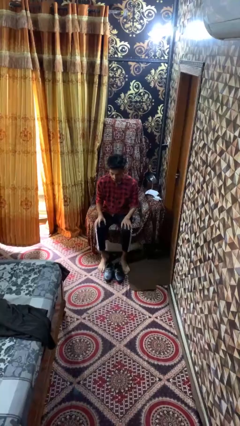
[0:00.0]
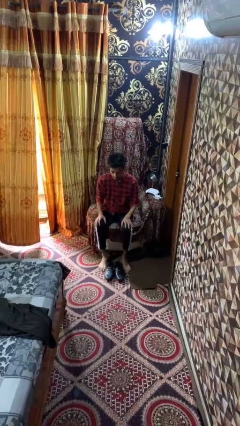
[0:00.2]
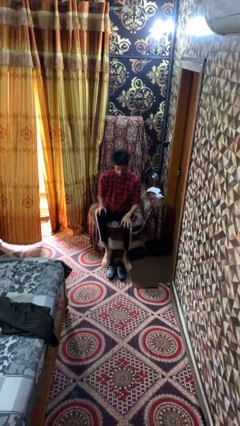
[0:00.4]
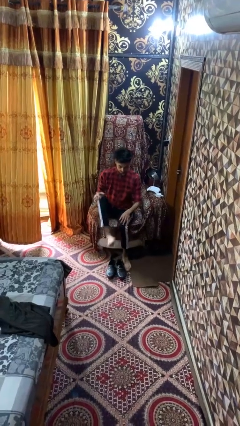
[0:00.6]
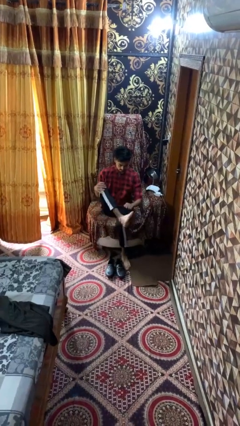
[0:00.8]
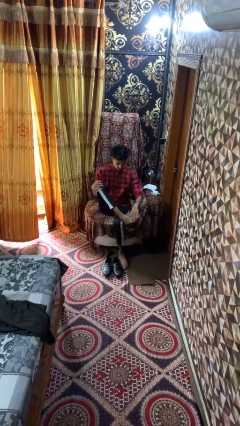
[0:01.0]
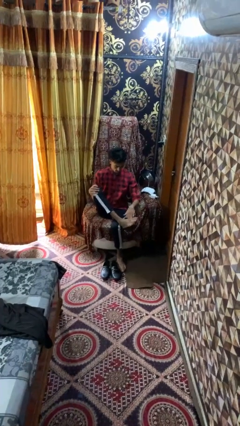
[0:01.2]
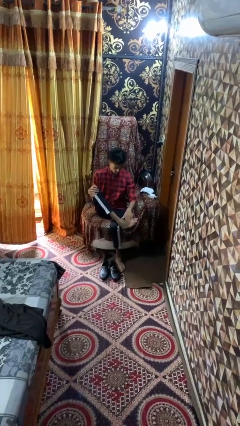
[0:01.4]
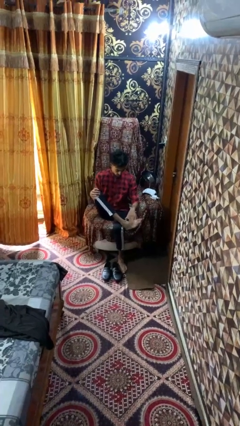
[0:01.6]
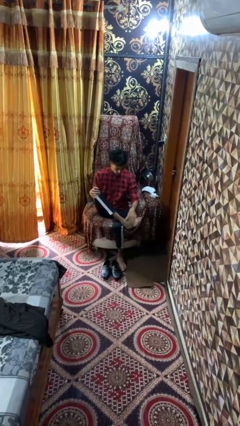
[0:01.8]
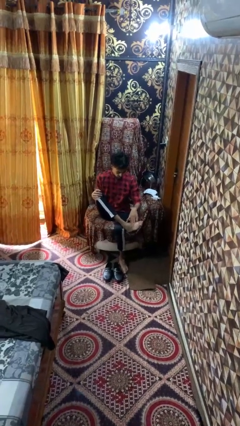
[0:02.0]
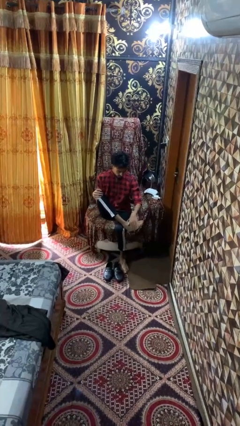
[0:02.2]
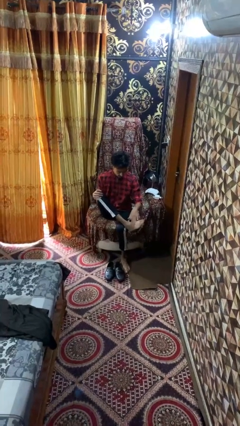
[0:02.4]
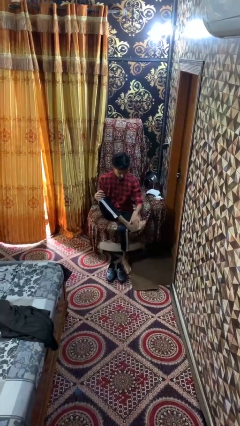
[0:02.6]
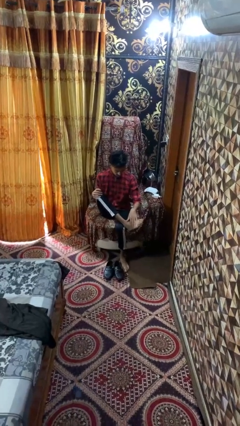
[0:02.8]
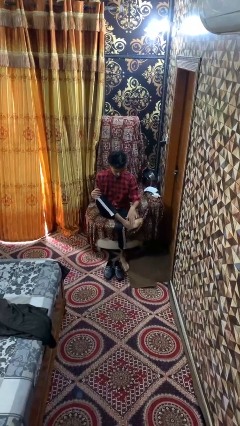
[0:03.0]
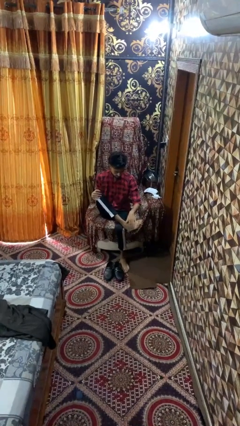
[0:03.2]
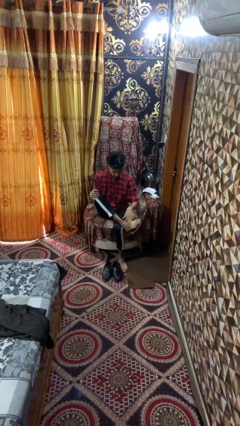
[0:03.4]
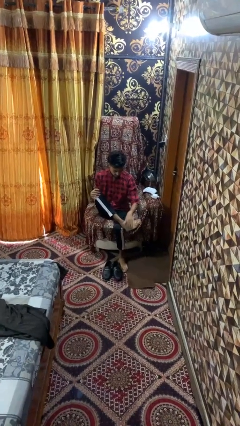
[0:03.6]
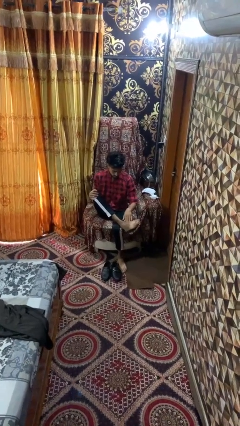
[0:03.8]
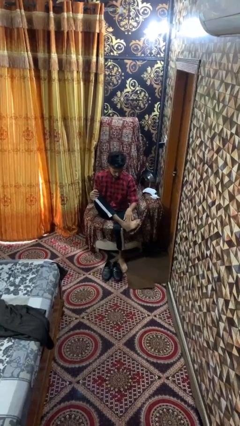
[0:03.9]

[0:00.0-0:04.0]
person rubs foot

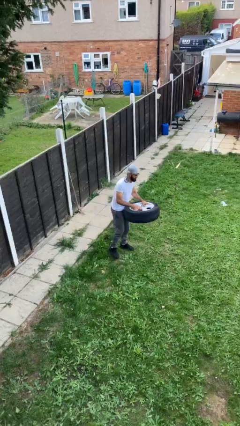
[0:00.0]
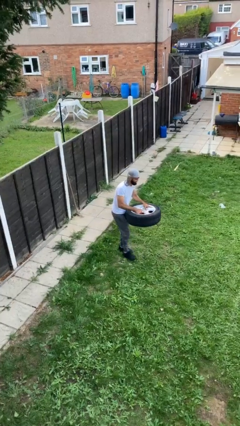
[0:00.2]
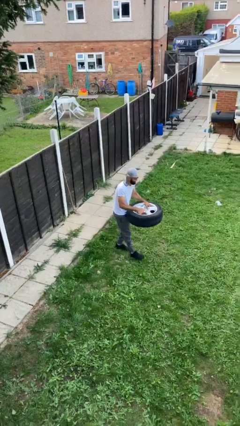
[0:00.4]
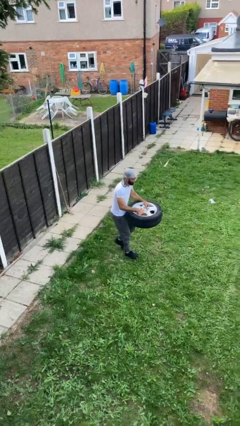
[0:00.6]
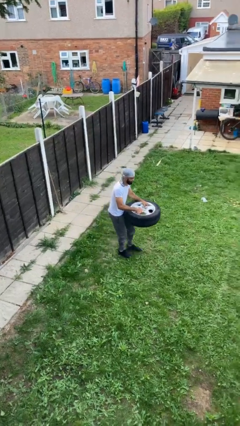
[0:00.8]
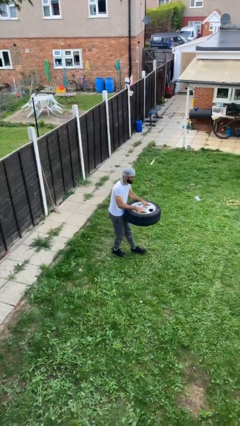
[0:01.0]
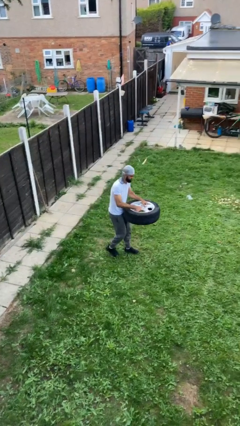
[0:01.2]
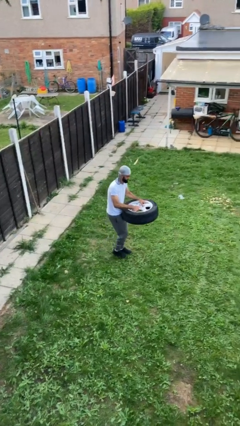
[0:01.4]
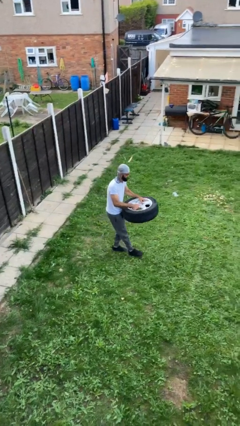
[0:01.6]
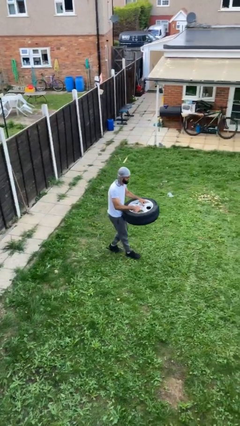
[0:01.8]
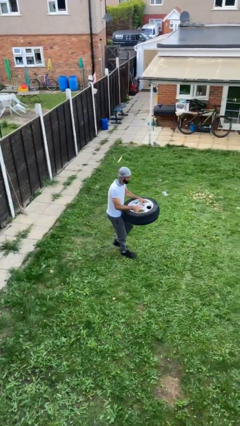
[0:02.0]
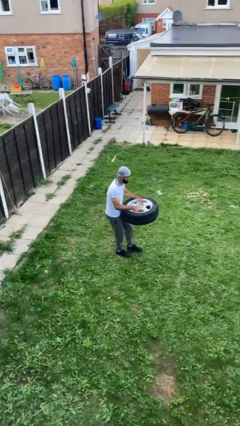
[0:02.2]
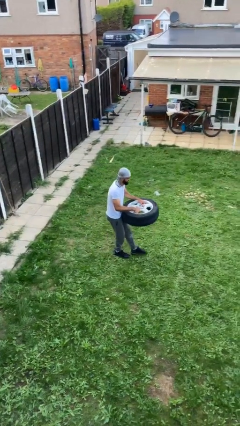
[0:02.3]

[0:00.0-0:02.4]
person carries heavy object

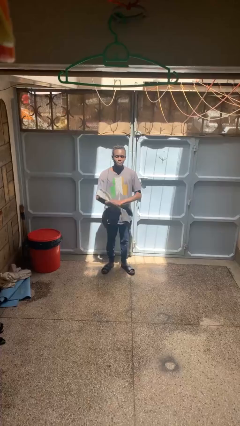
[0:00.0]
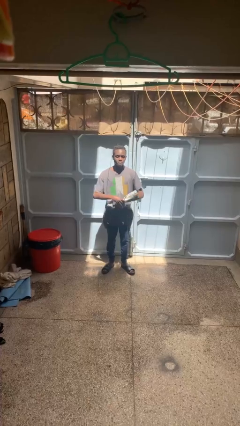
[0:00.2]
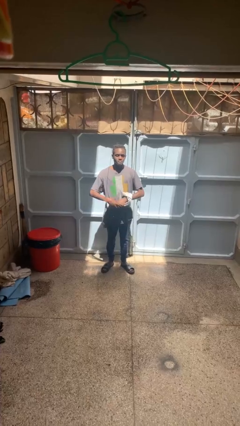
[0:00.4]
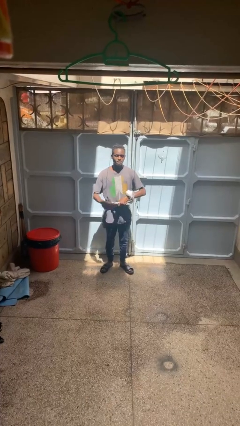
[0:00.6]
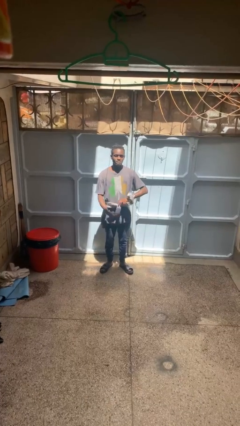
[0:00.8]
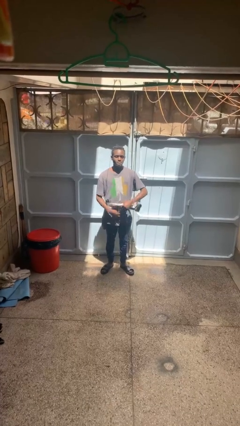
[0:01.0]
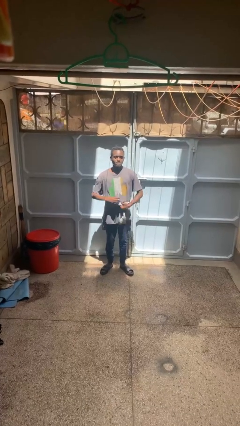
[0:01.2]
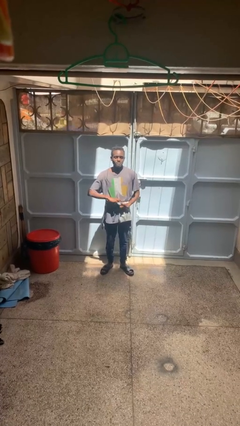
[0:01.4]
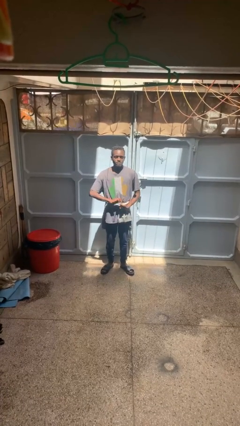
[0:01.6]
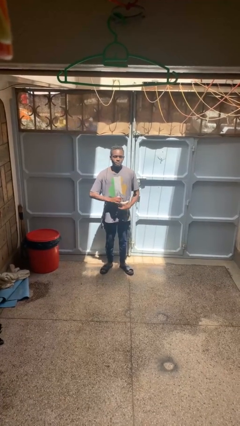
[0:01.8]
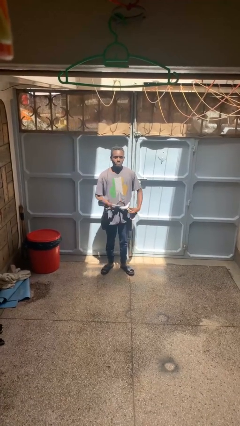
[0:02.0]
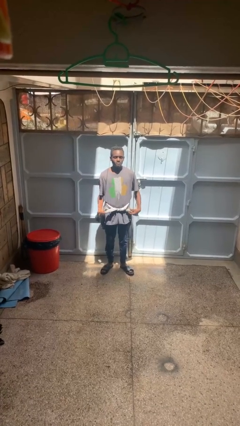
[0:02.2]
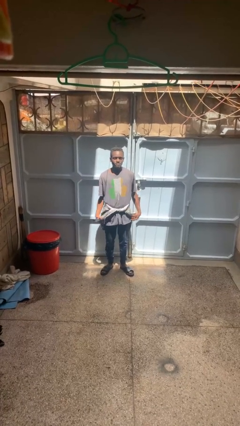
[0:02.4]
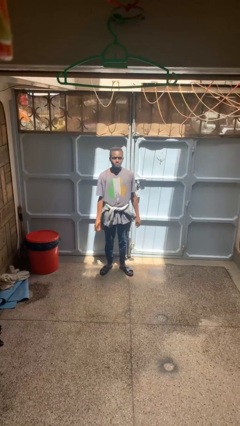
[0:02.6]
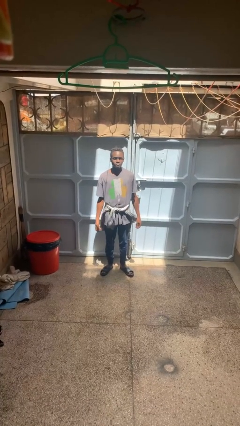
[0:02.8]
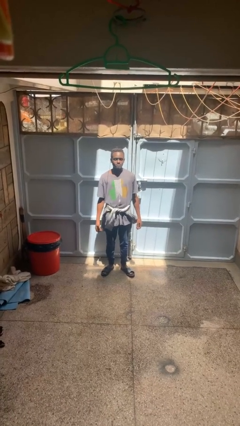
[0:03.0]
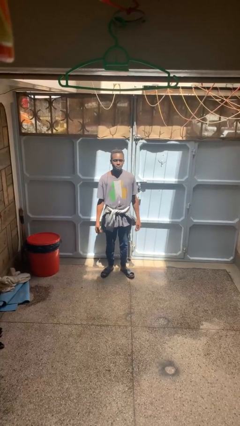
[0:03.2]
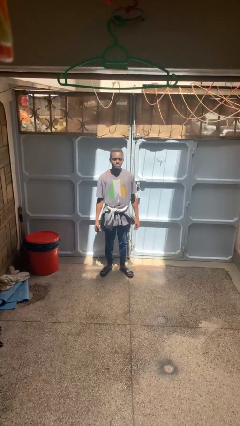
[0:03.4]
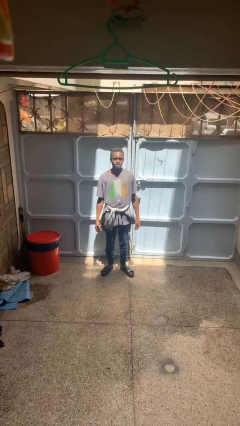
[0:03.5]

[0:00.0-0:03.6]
person ties jacket around waist

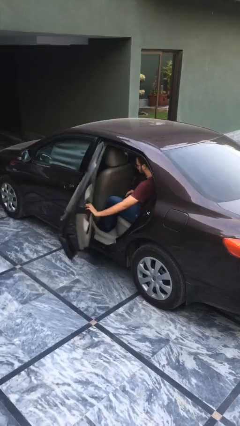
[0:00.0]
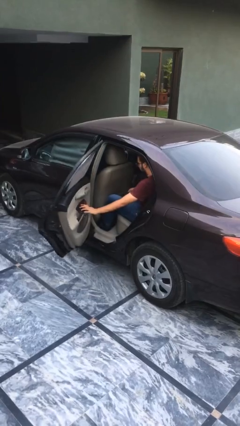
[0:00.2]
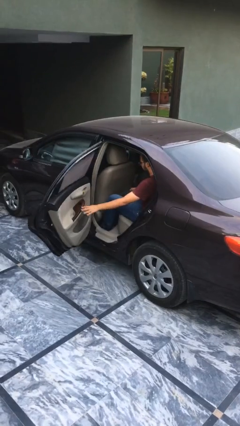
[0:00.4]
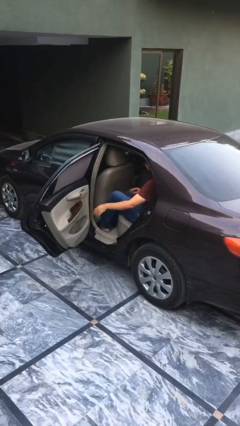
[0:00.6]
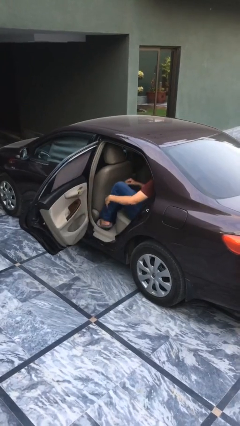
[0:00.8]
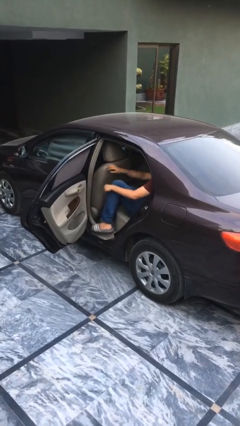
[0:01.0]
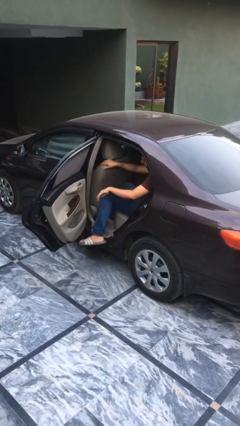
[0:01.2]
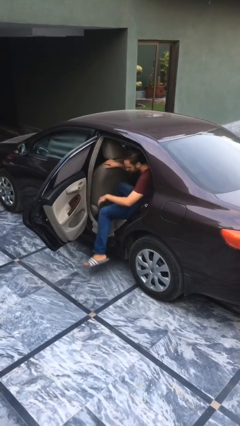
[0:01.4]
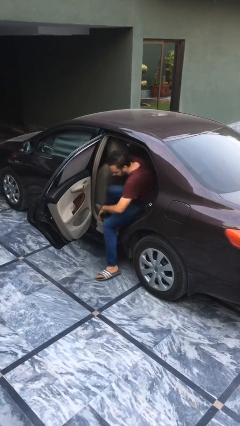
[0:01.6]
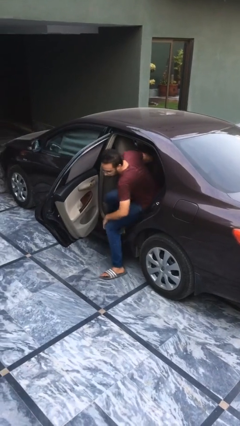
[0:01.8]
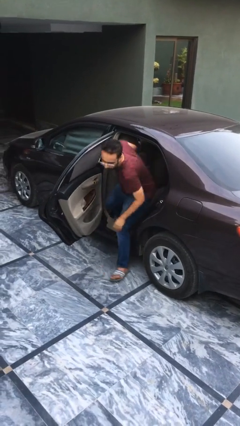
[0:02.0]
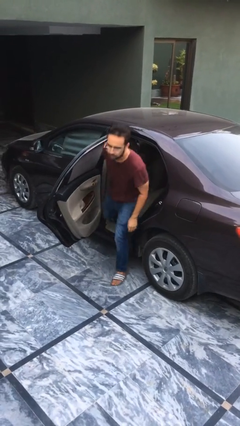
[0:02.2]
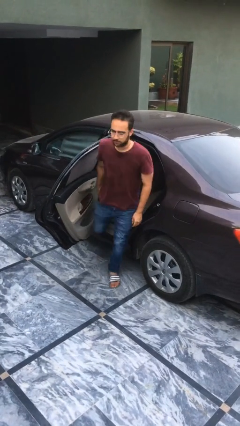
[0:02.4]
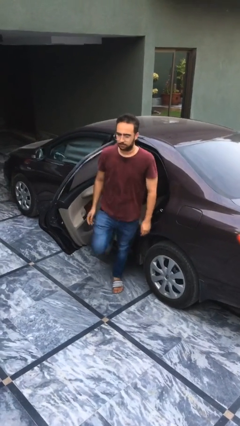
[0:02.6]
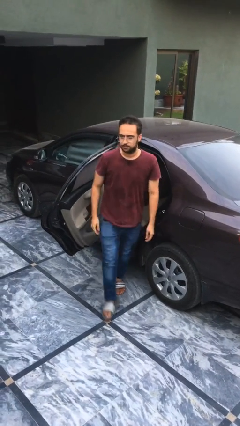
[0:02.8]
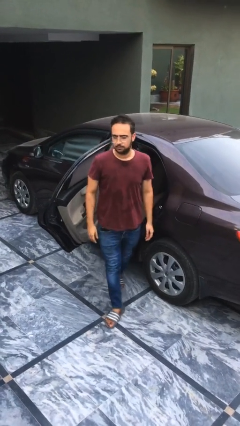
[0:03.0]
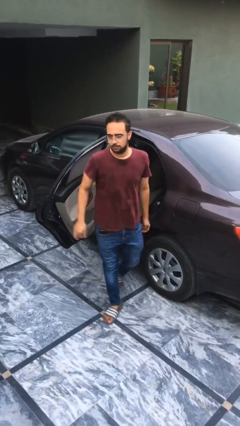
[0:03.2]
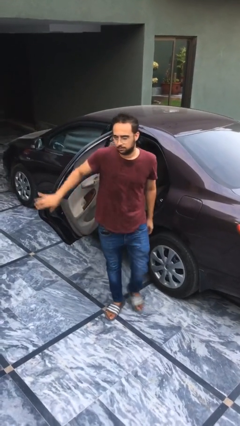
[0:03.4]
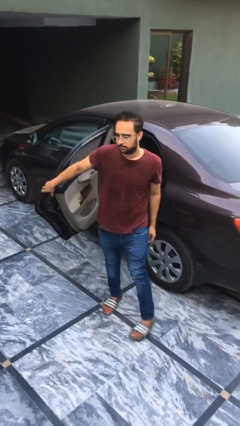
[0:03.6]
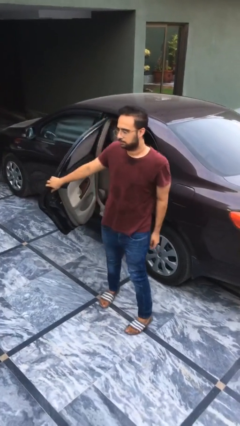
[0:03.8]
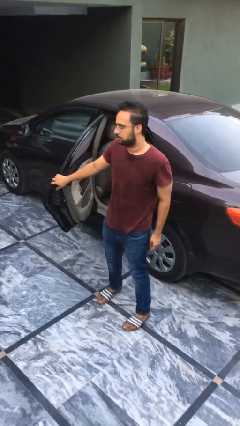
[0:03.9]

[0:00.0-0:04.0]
person exits car

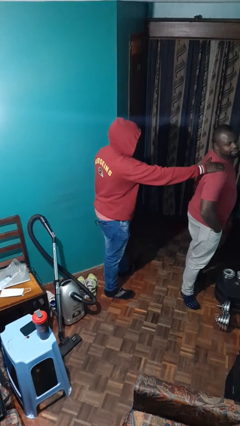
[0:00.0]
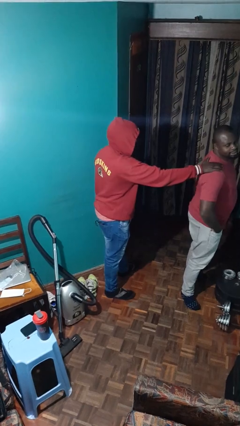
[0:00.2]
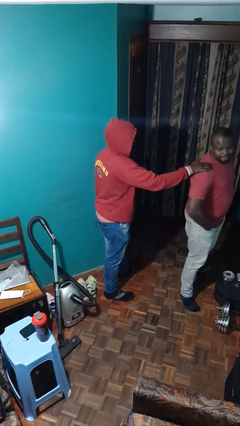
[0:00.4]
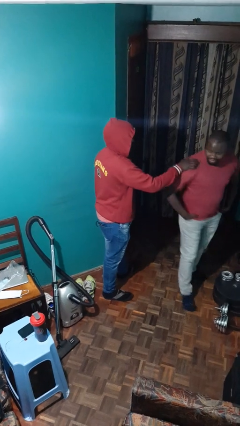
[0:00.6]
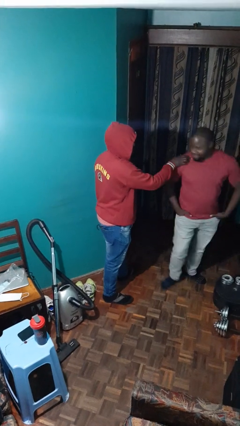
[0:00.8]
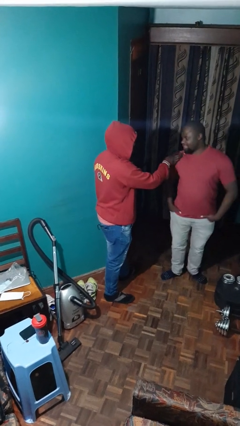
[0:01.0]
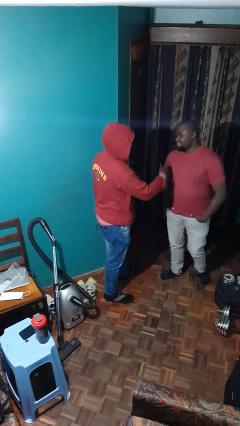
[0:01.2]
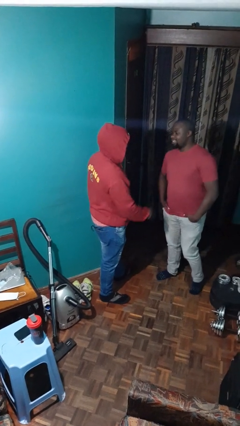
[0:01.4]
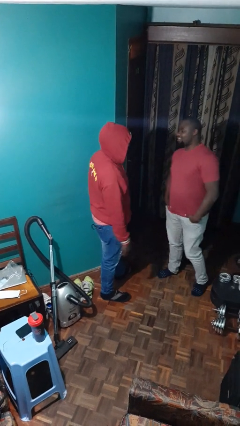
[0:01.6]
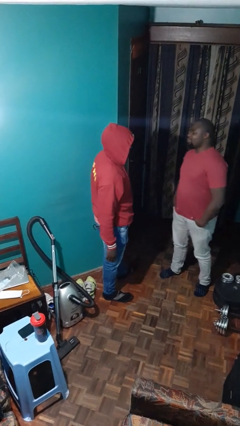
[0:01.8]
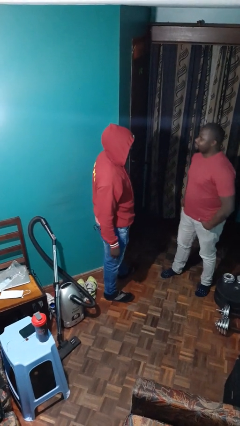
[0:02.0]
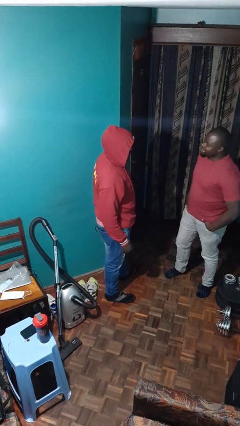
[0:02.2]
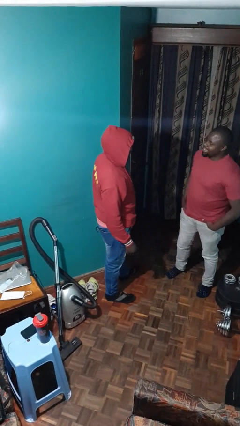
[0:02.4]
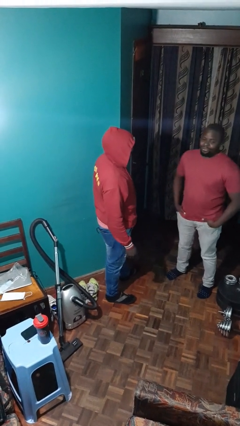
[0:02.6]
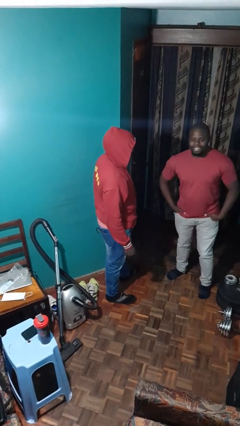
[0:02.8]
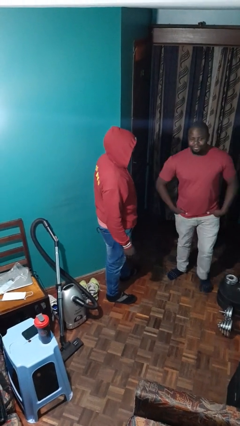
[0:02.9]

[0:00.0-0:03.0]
person spins person around

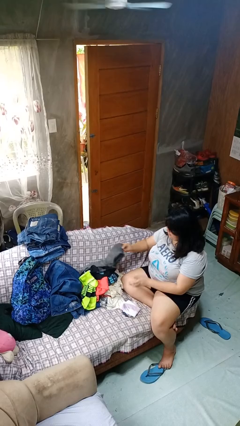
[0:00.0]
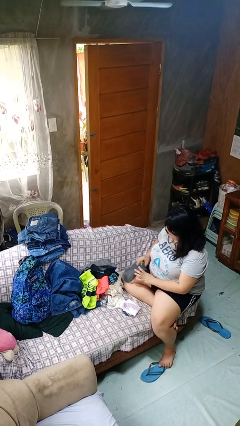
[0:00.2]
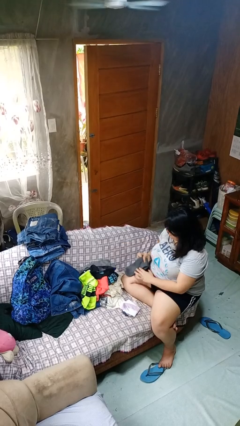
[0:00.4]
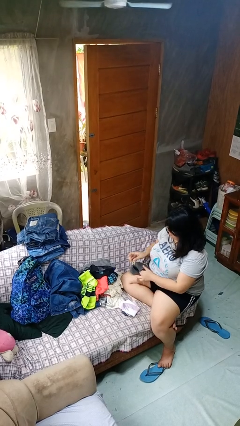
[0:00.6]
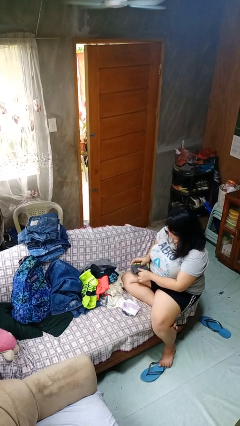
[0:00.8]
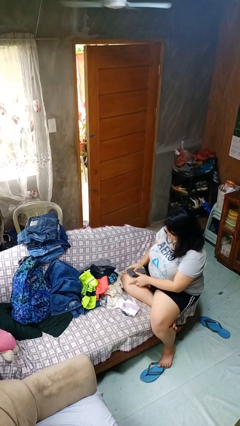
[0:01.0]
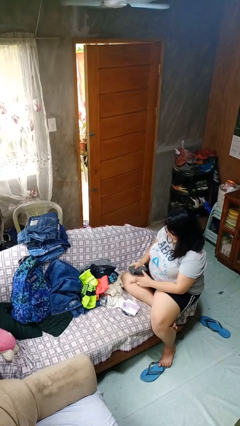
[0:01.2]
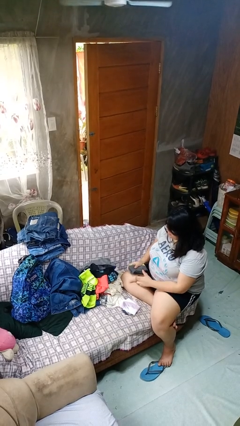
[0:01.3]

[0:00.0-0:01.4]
person folds socks
